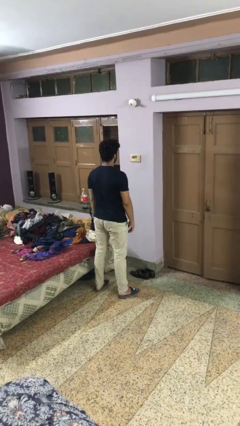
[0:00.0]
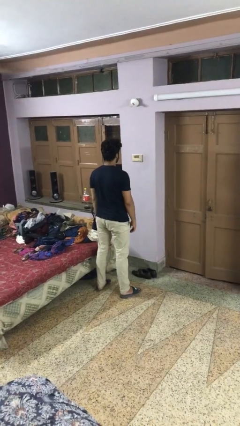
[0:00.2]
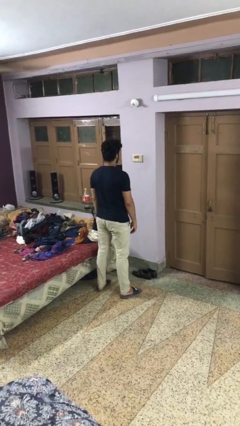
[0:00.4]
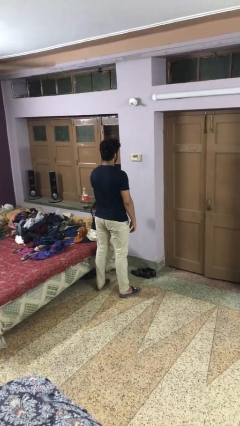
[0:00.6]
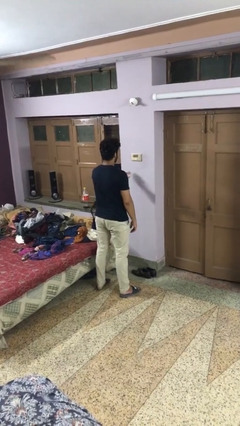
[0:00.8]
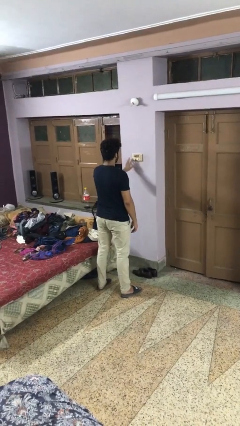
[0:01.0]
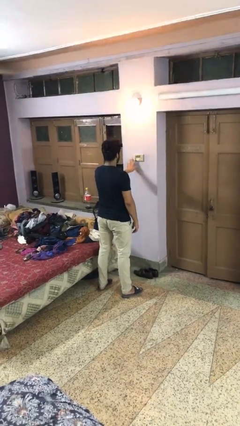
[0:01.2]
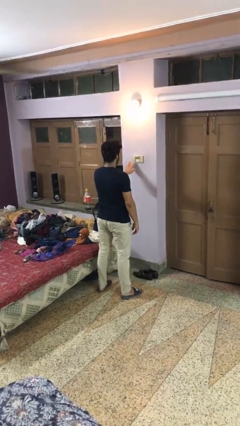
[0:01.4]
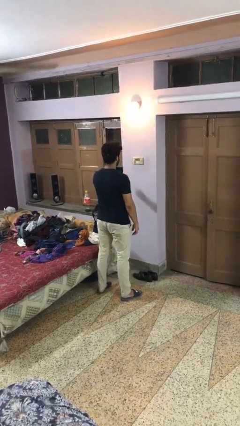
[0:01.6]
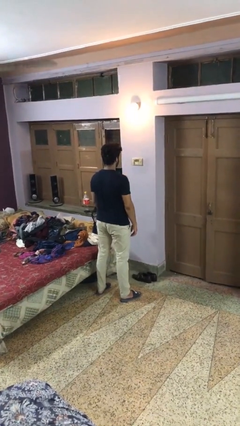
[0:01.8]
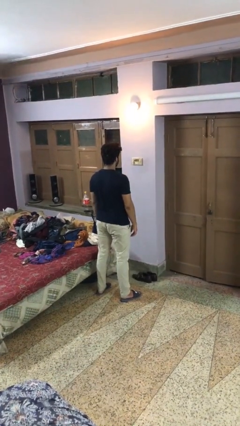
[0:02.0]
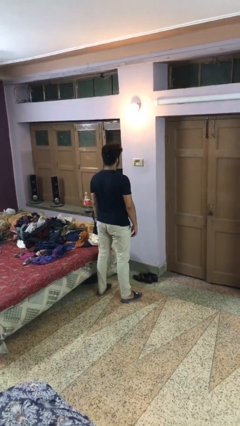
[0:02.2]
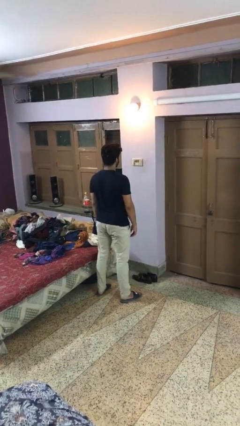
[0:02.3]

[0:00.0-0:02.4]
person turns on lamp

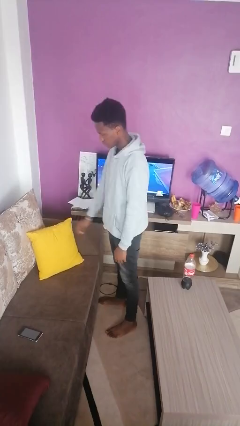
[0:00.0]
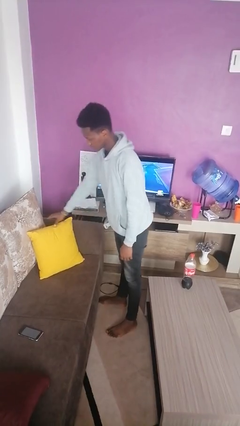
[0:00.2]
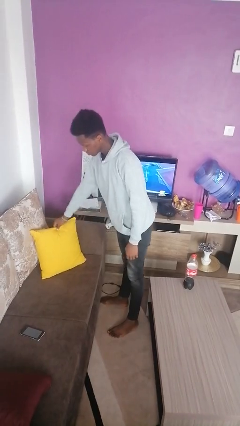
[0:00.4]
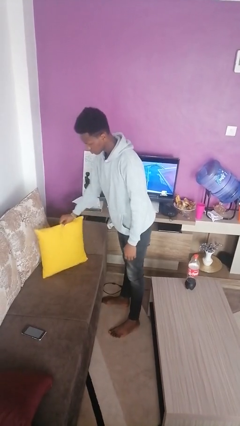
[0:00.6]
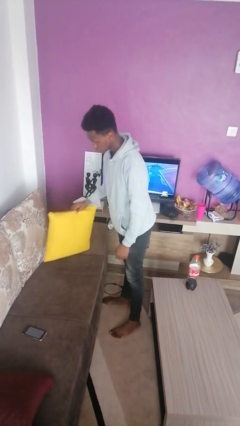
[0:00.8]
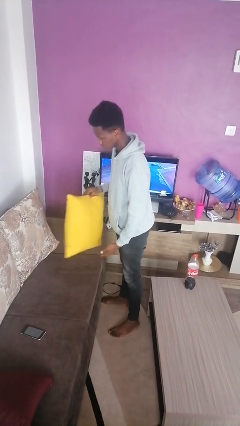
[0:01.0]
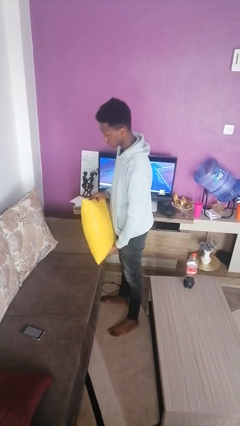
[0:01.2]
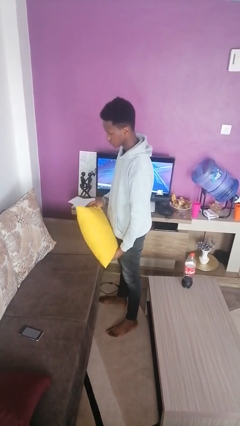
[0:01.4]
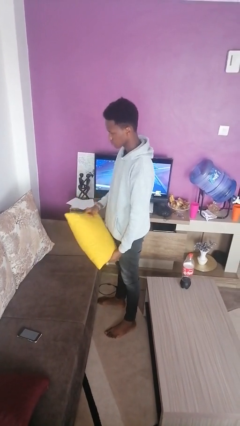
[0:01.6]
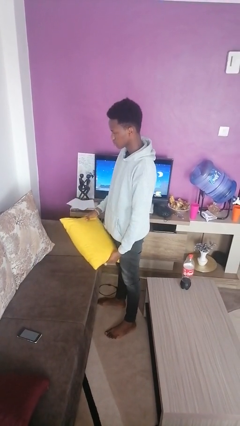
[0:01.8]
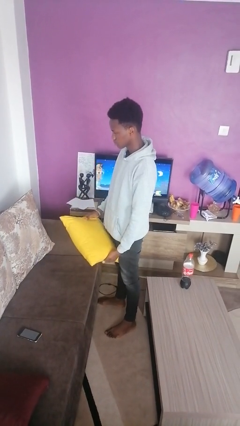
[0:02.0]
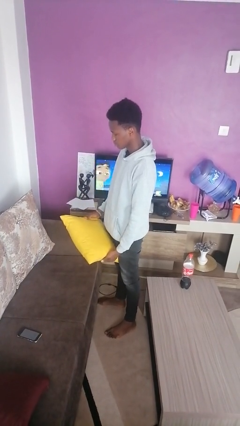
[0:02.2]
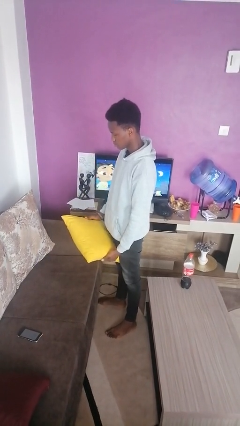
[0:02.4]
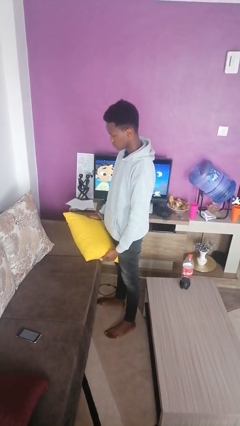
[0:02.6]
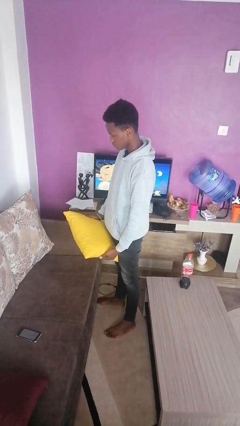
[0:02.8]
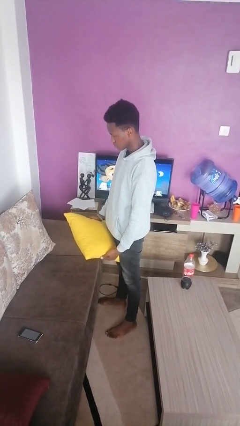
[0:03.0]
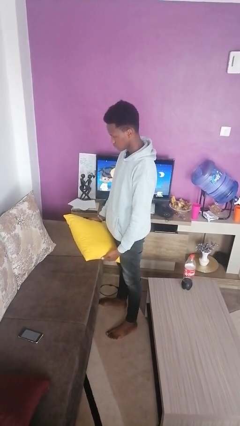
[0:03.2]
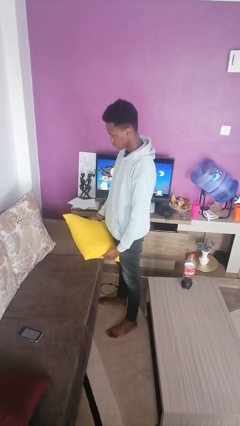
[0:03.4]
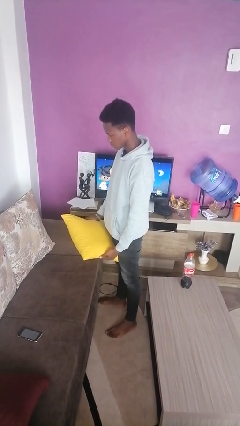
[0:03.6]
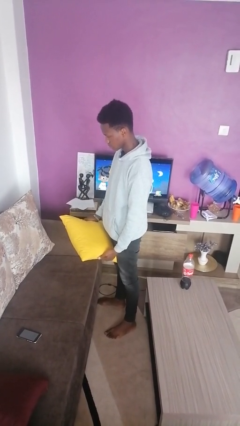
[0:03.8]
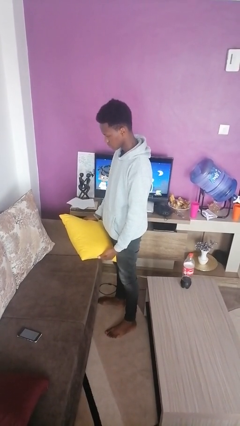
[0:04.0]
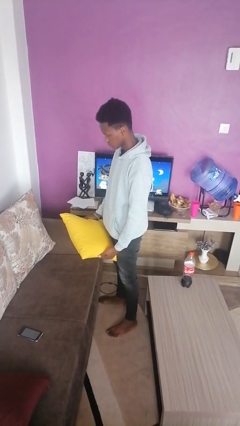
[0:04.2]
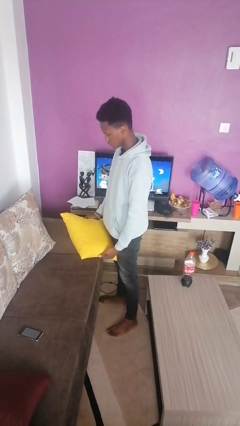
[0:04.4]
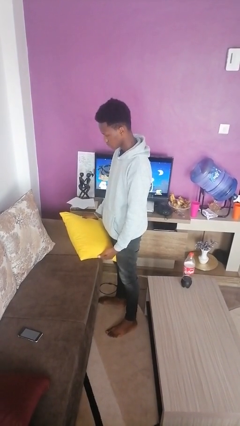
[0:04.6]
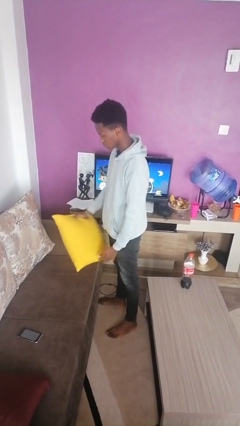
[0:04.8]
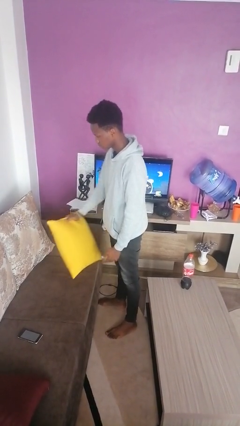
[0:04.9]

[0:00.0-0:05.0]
person picks up object from couch

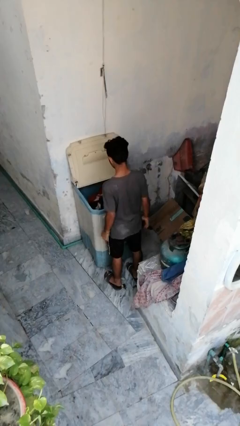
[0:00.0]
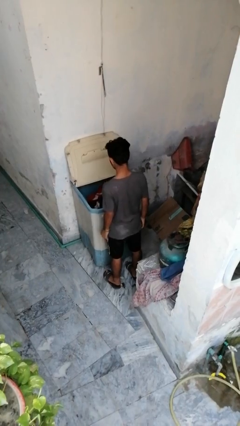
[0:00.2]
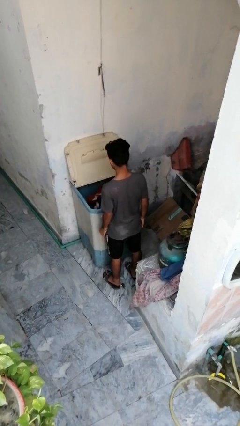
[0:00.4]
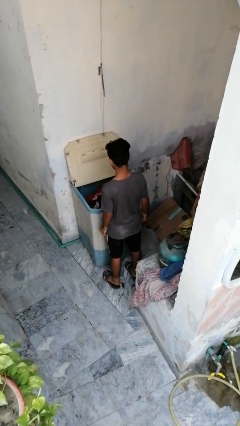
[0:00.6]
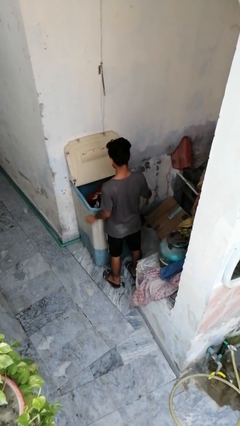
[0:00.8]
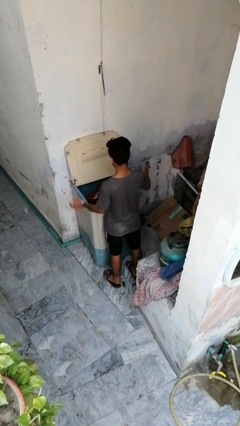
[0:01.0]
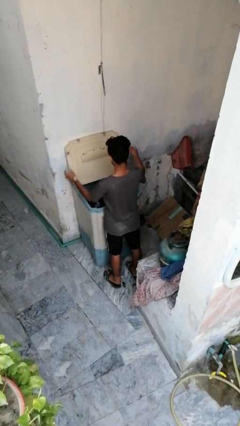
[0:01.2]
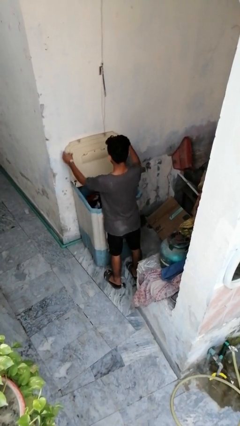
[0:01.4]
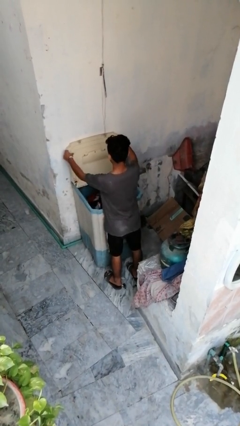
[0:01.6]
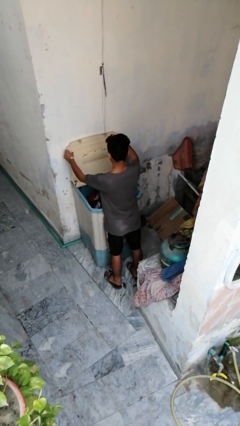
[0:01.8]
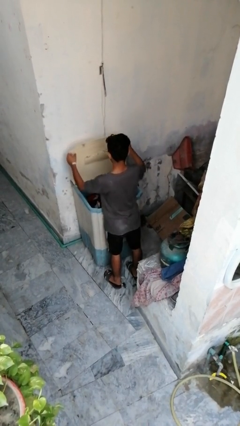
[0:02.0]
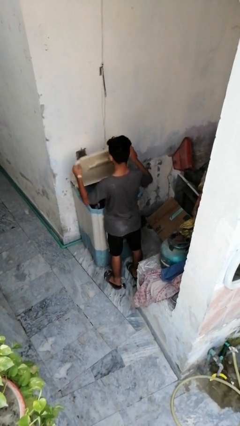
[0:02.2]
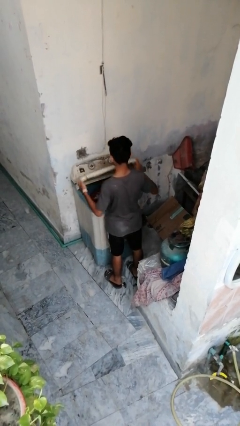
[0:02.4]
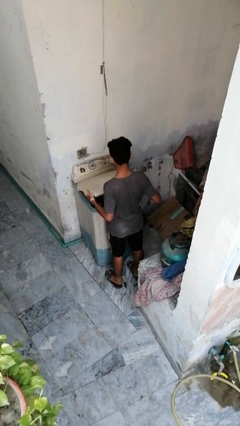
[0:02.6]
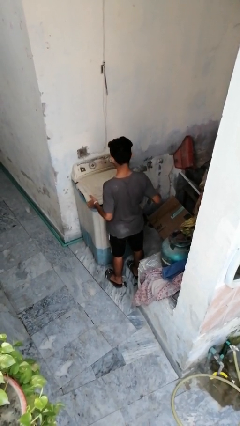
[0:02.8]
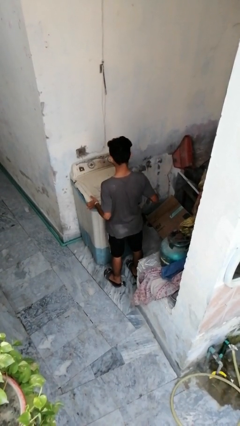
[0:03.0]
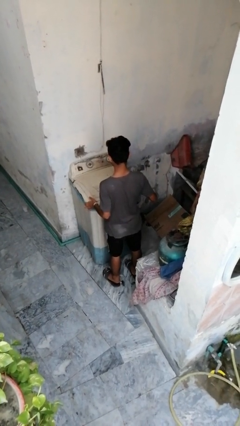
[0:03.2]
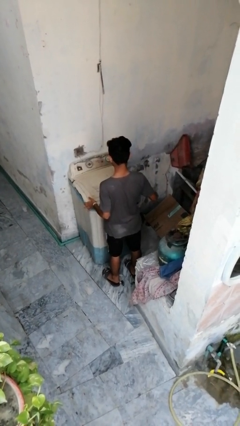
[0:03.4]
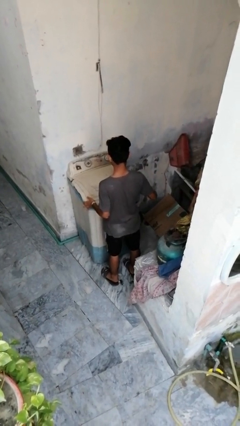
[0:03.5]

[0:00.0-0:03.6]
person closes clothes washer

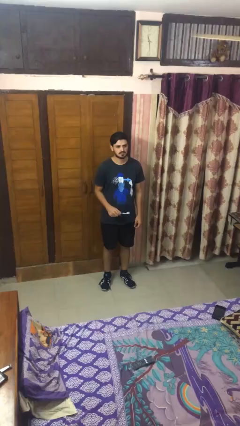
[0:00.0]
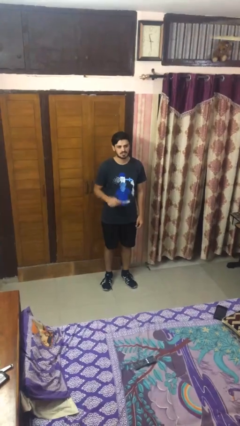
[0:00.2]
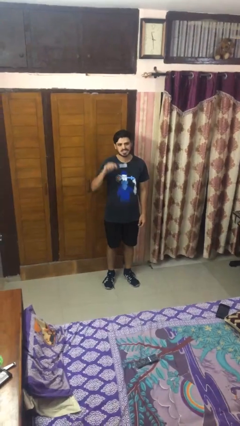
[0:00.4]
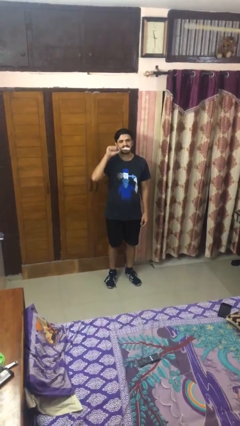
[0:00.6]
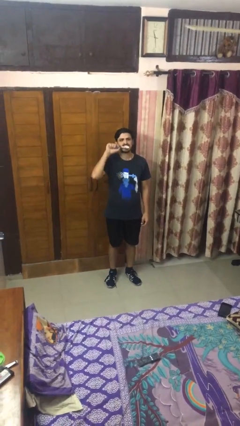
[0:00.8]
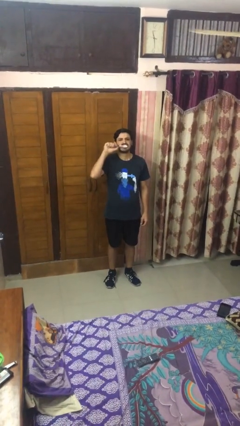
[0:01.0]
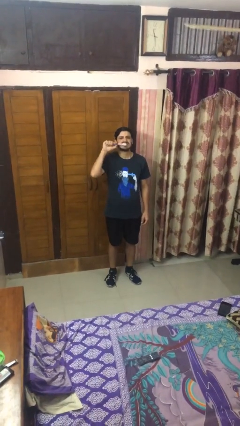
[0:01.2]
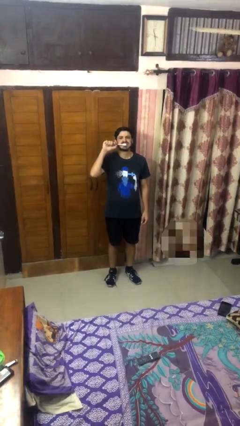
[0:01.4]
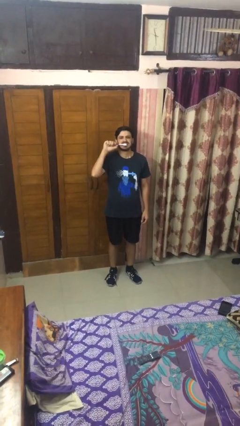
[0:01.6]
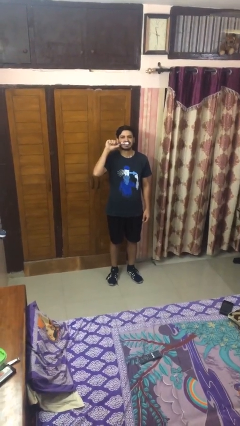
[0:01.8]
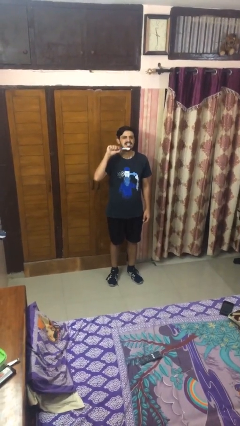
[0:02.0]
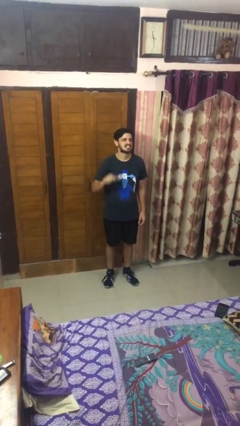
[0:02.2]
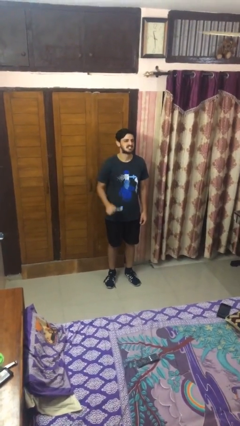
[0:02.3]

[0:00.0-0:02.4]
person brushes teeth

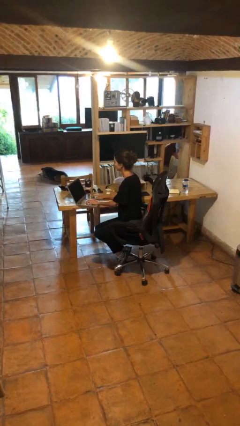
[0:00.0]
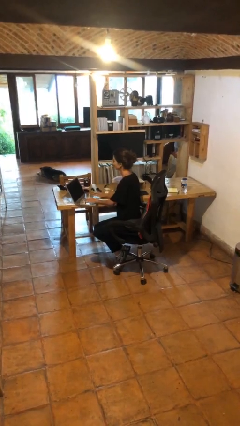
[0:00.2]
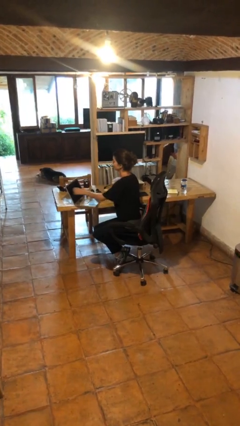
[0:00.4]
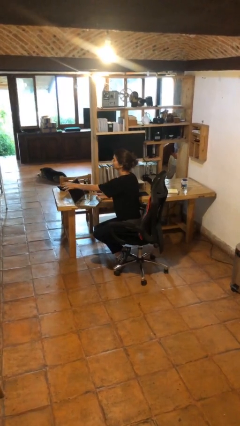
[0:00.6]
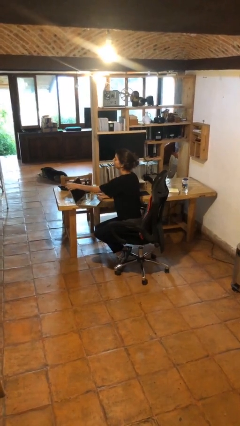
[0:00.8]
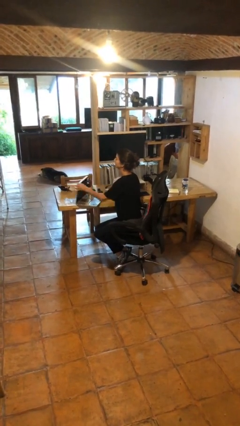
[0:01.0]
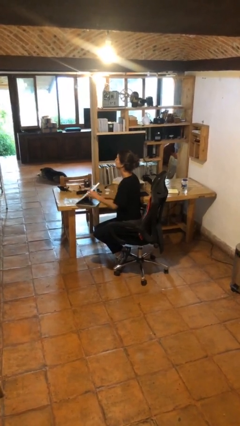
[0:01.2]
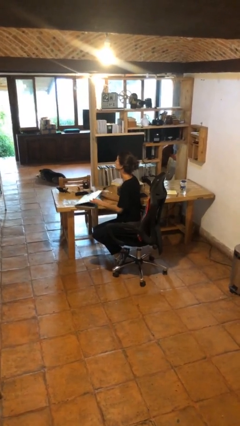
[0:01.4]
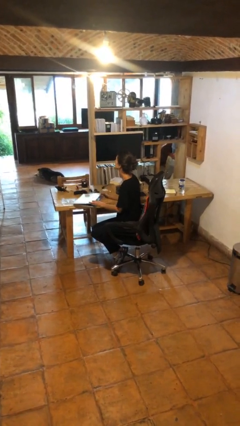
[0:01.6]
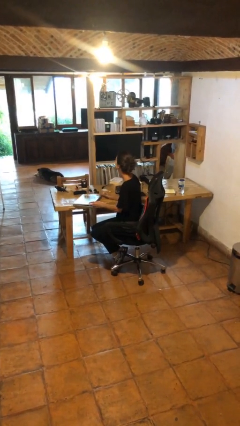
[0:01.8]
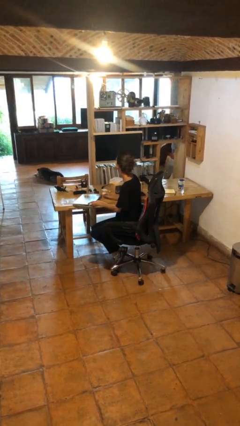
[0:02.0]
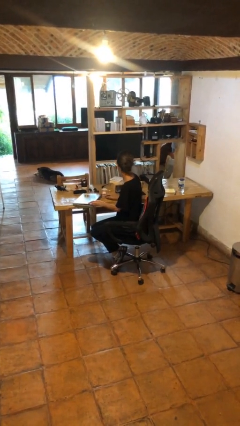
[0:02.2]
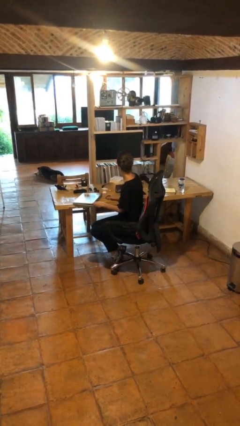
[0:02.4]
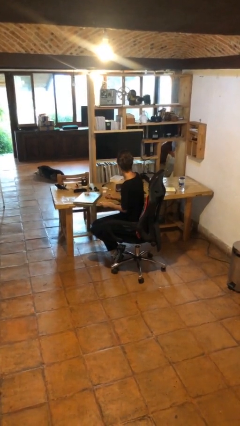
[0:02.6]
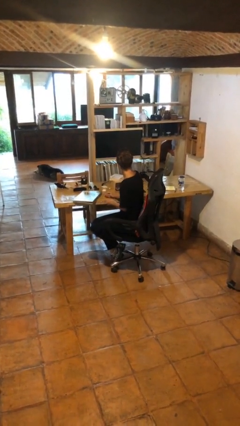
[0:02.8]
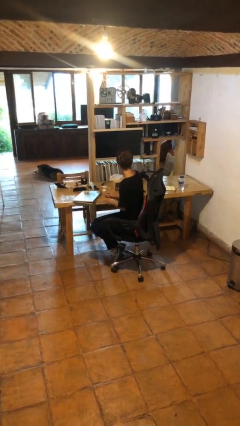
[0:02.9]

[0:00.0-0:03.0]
person closes laptop

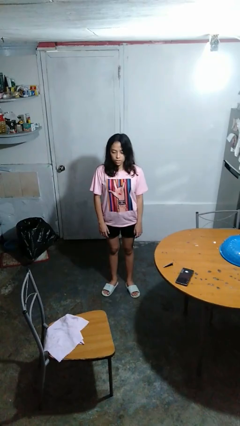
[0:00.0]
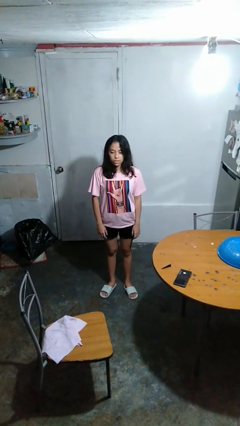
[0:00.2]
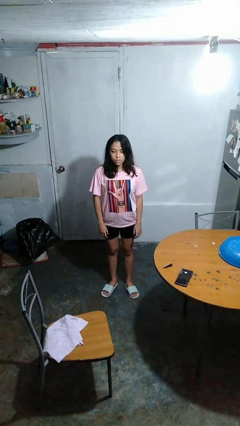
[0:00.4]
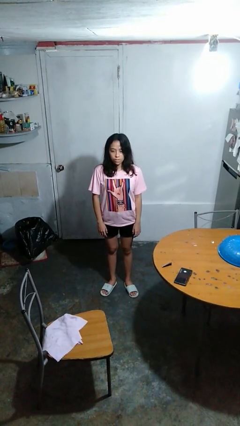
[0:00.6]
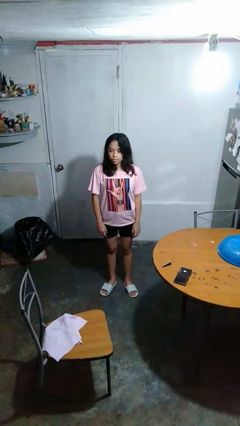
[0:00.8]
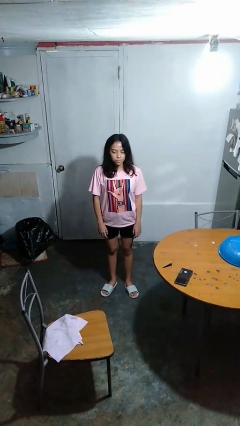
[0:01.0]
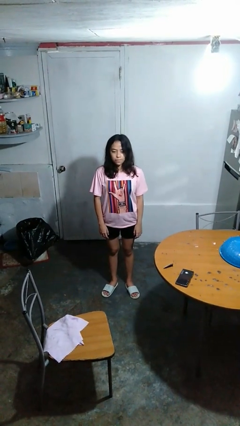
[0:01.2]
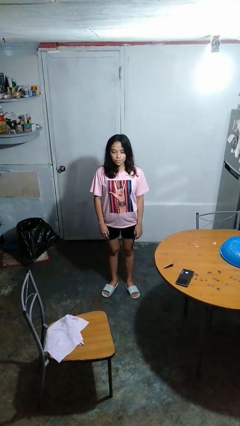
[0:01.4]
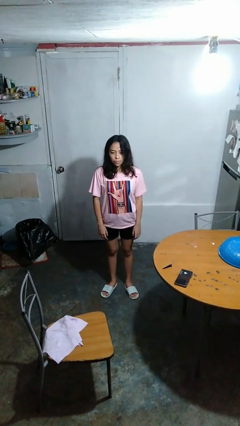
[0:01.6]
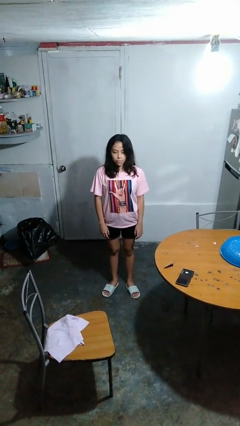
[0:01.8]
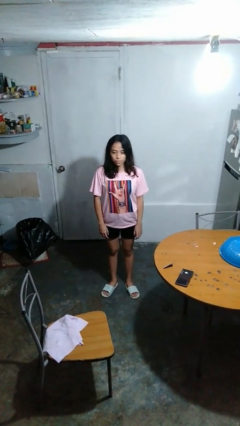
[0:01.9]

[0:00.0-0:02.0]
person shakes head
